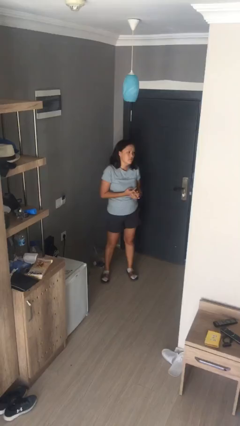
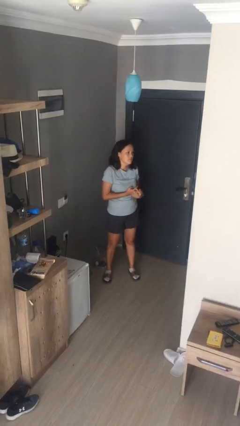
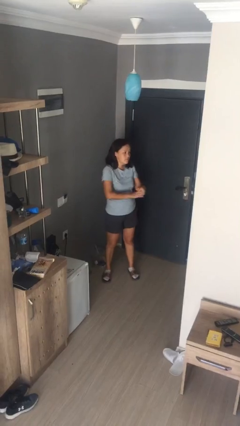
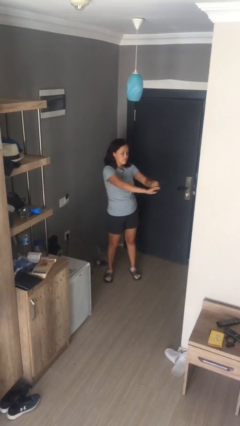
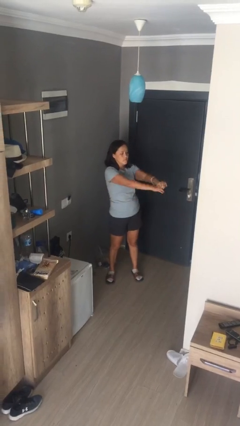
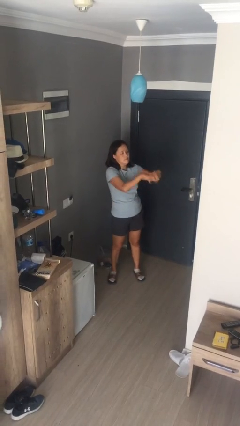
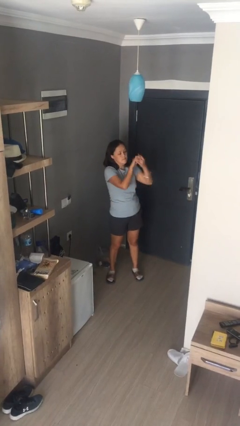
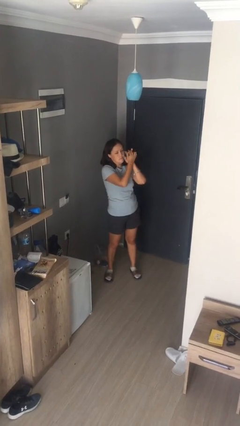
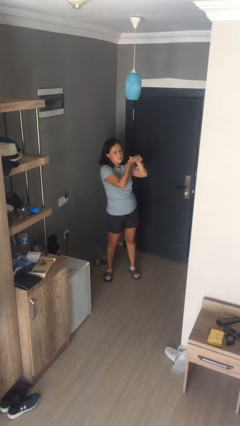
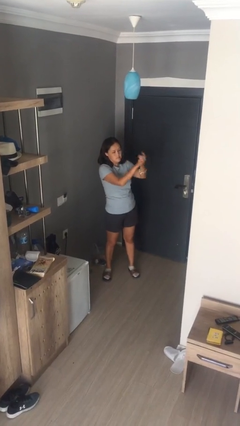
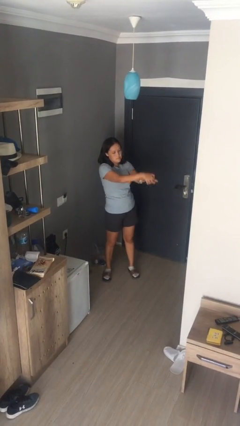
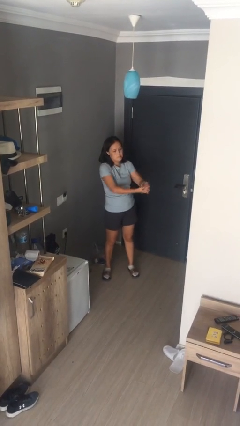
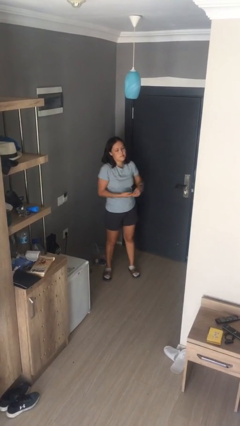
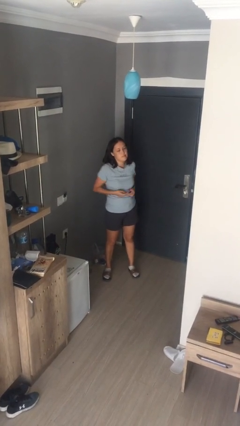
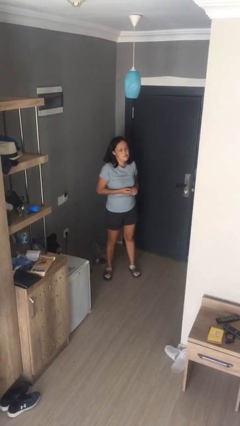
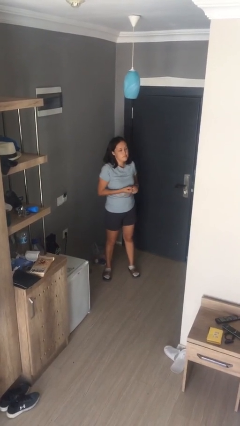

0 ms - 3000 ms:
person cracks knuckles

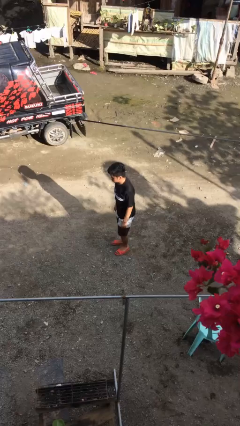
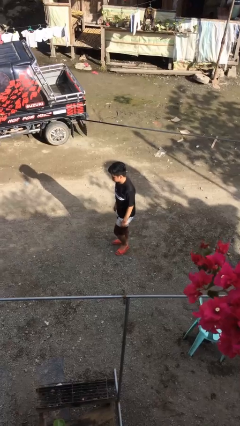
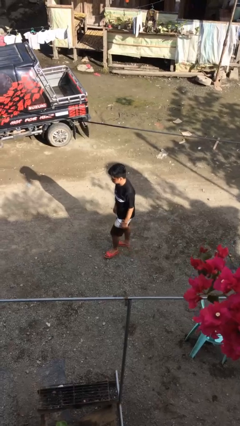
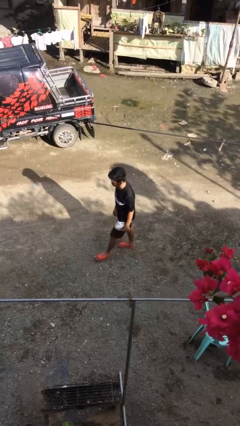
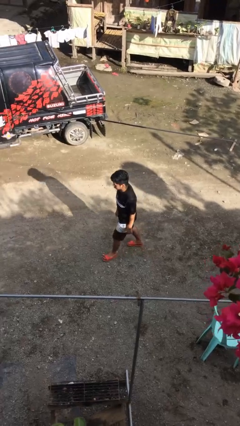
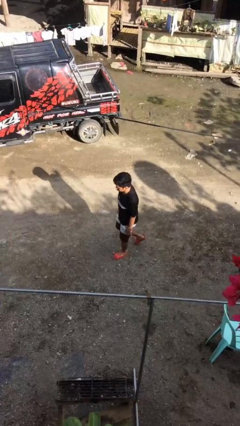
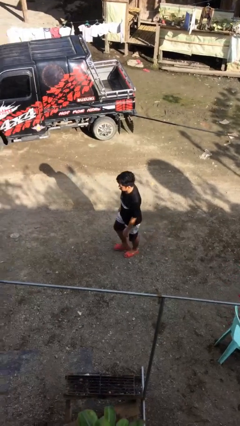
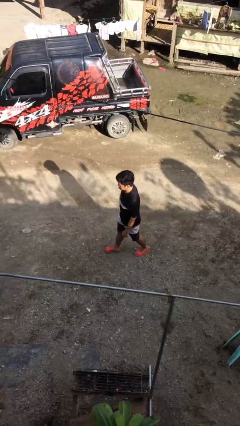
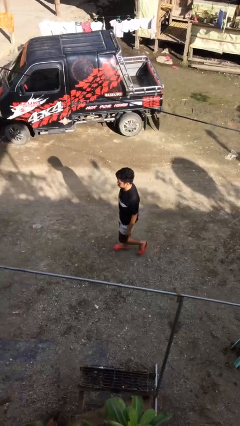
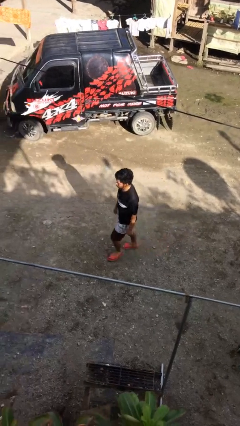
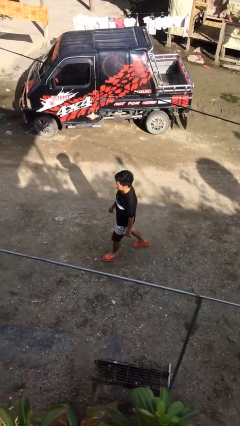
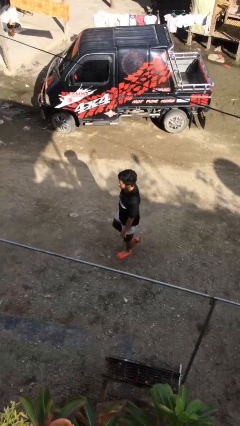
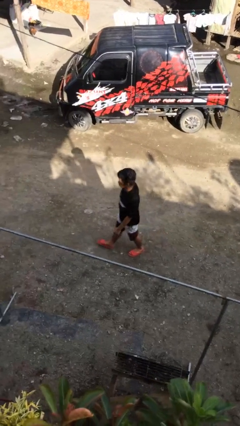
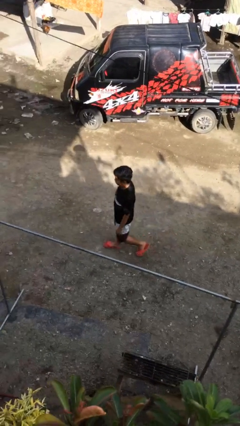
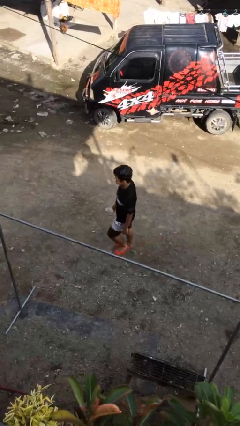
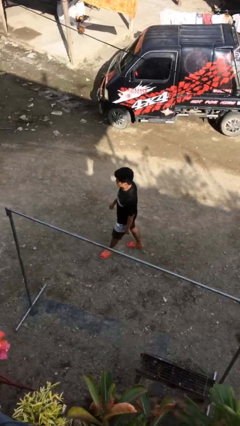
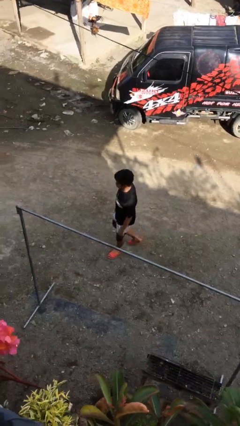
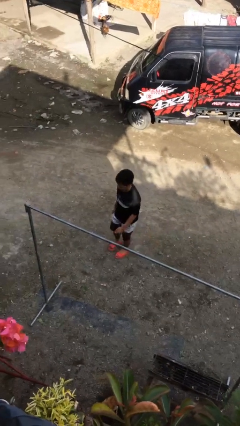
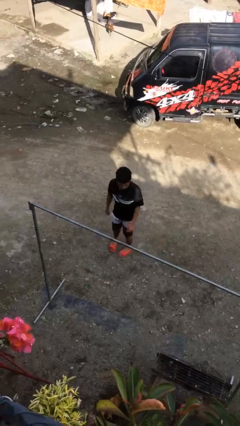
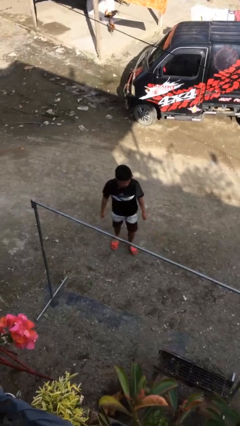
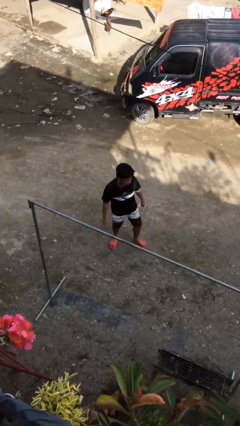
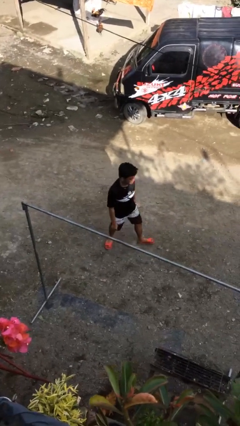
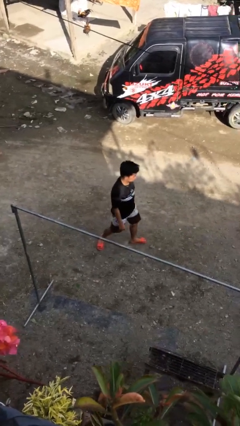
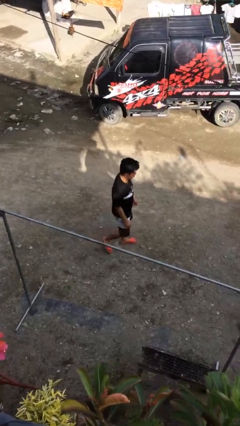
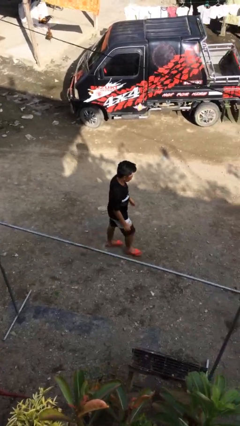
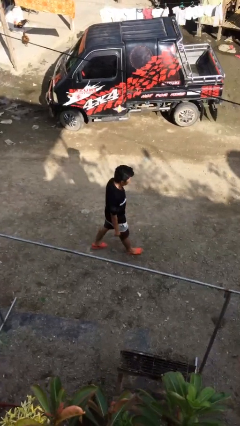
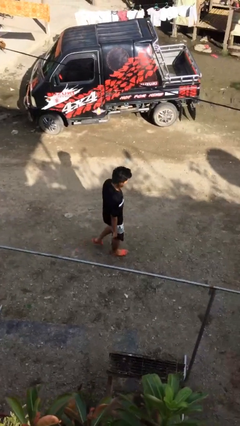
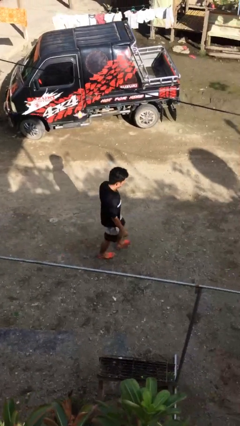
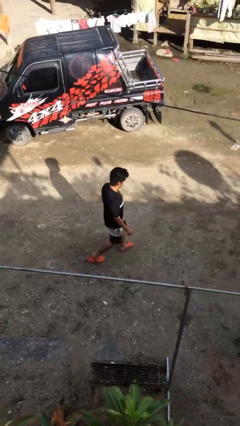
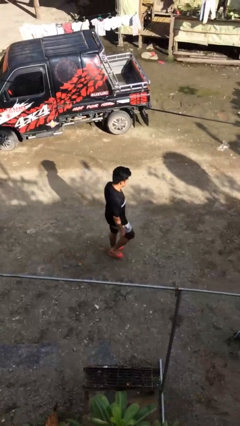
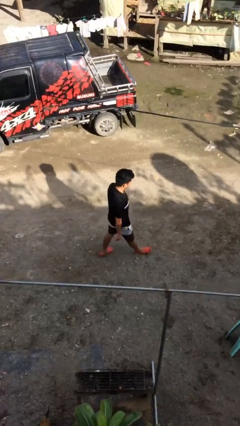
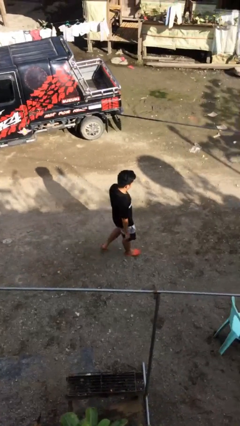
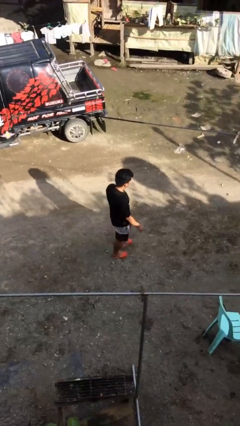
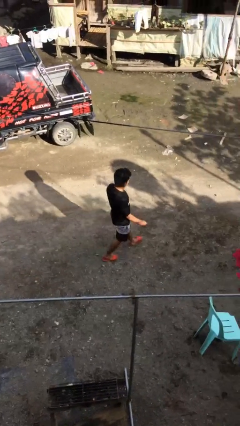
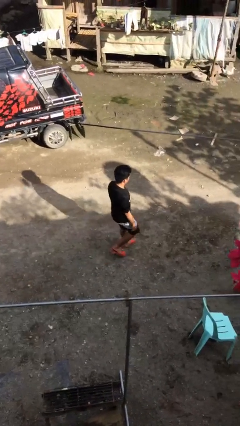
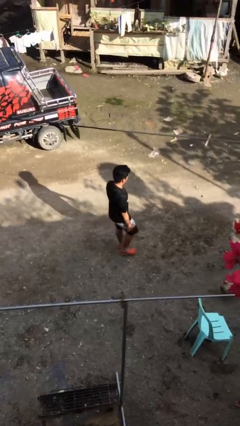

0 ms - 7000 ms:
person walks

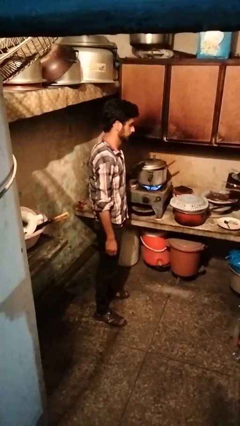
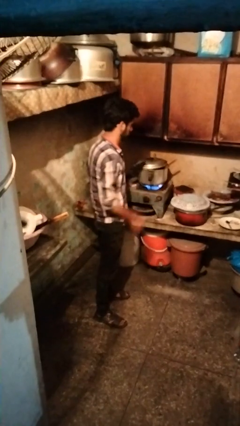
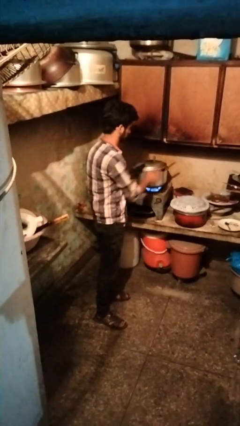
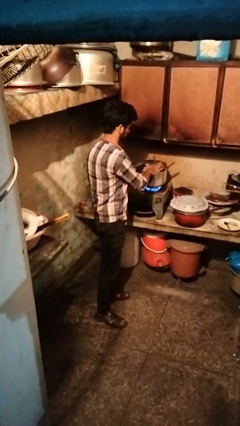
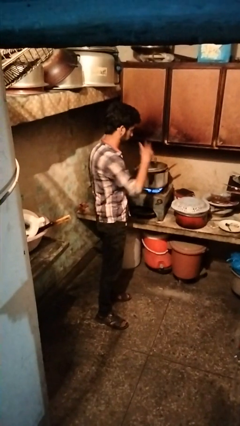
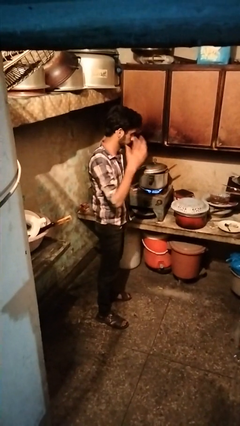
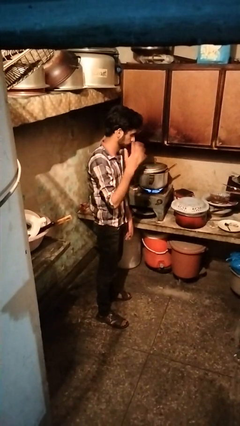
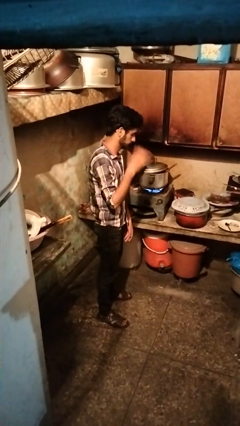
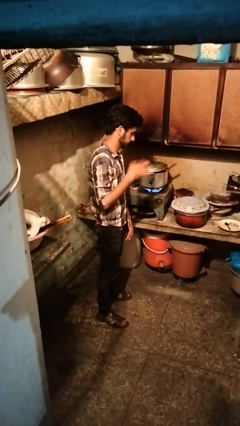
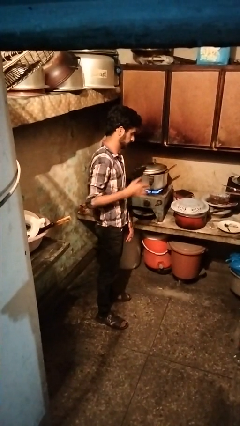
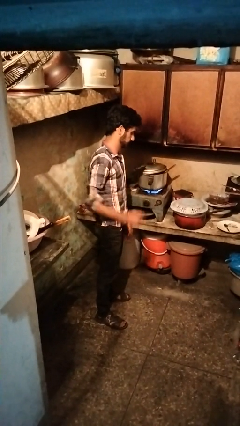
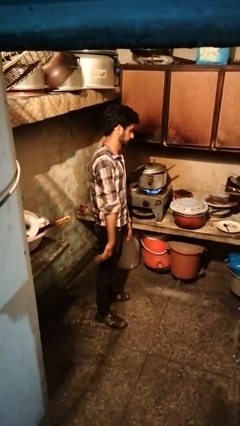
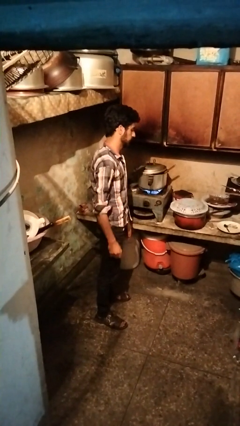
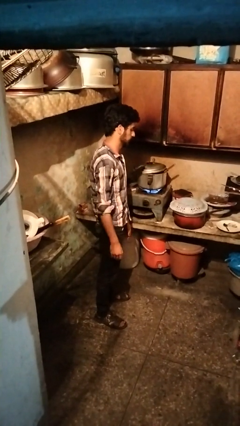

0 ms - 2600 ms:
person burns hand

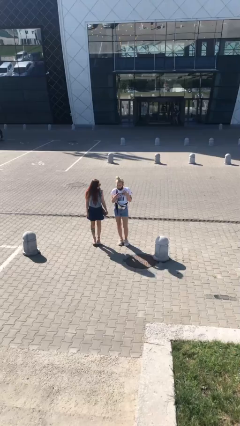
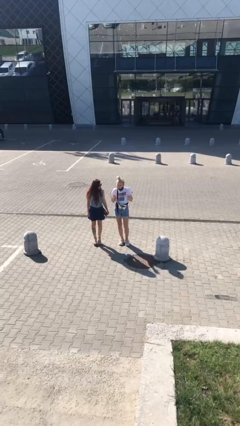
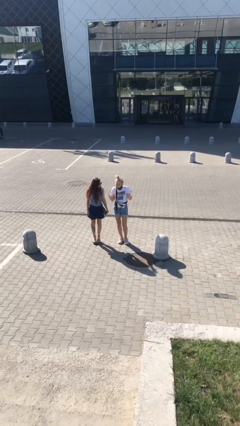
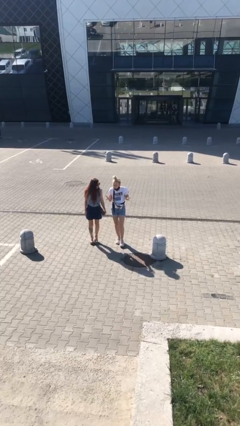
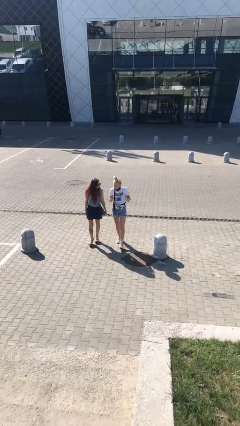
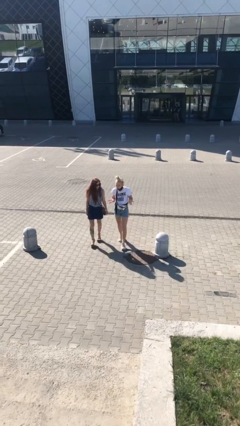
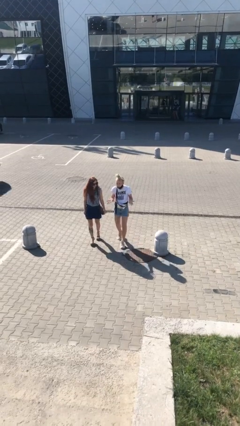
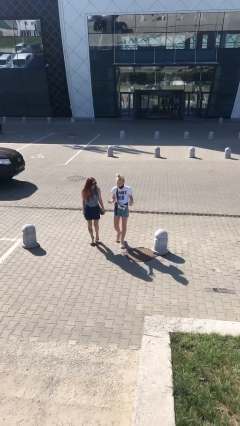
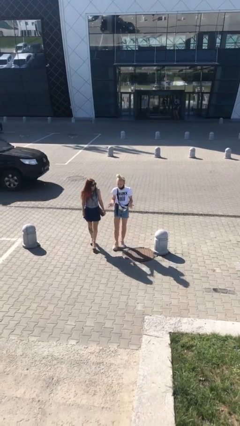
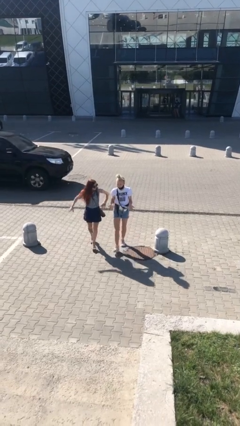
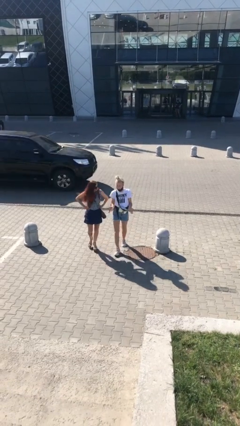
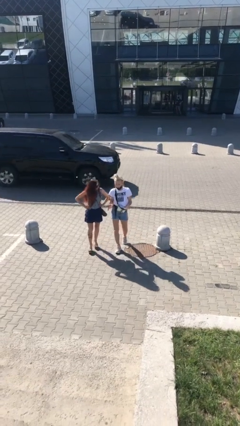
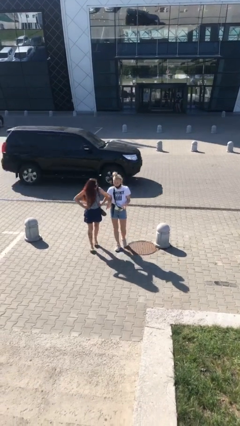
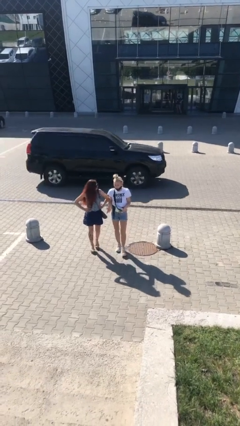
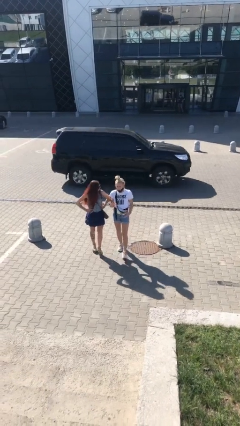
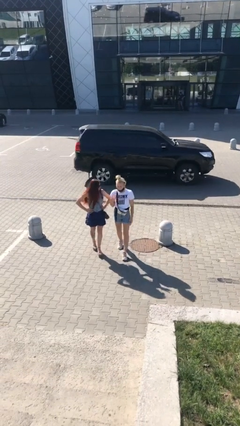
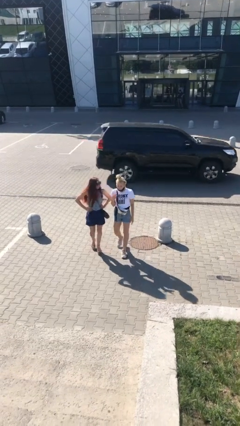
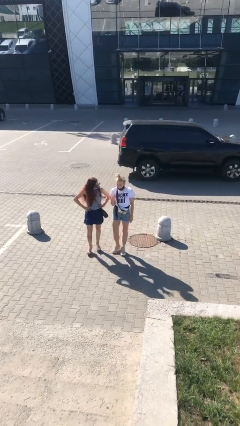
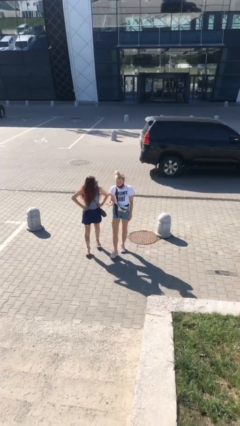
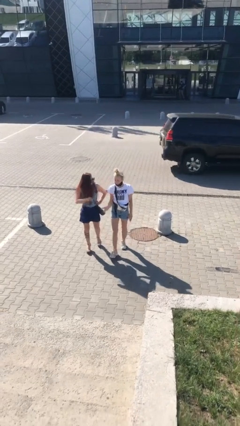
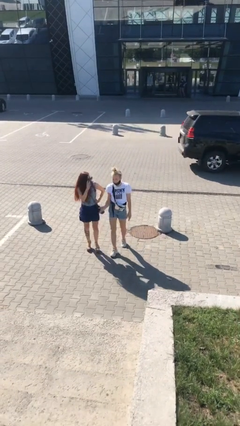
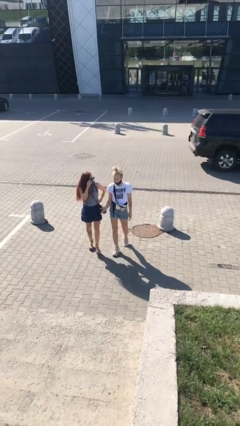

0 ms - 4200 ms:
person talks to person

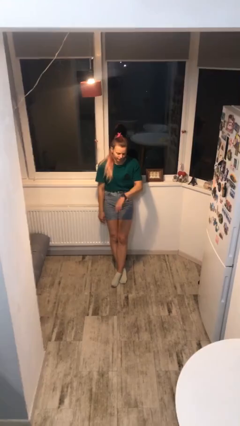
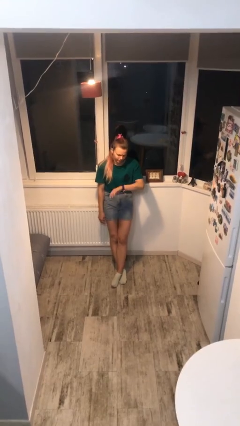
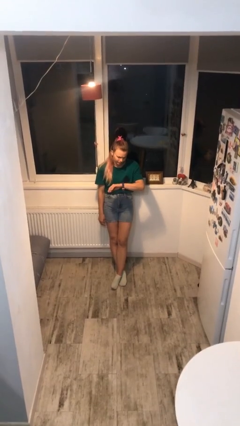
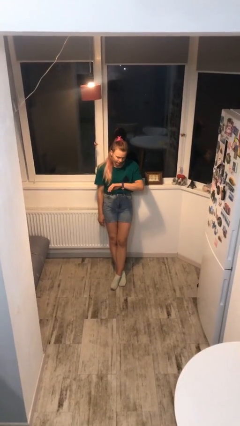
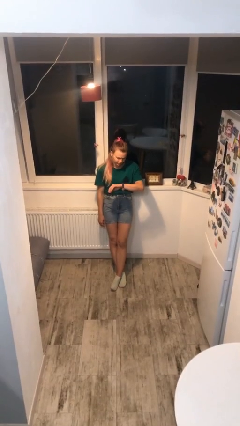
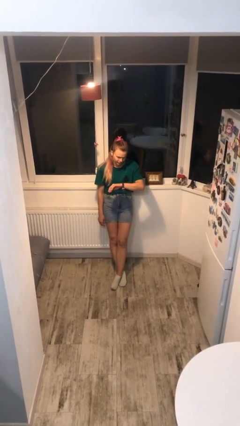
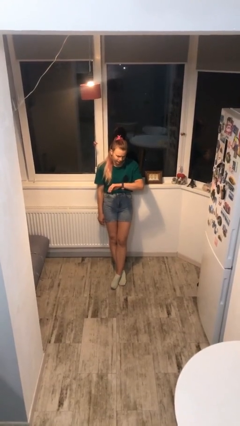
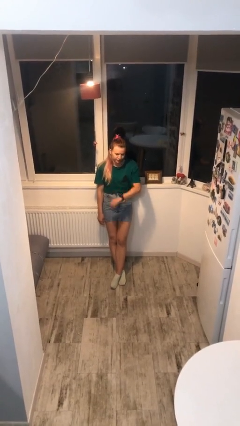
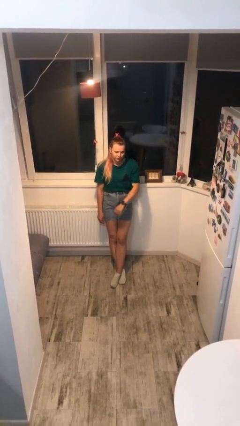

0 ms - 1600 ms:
person looks at wristwatch
